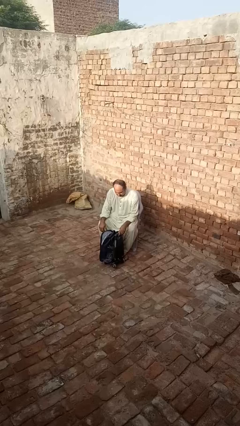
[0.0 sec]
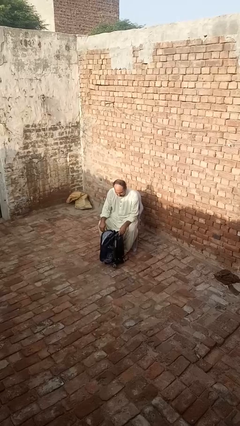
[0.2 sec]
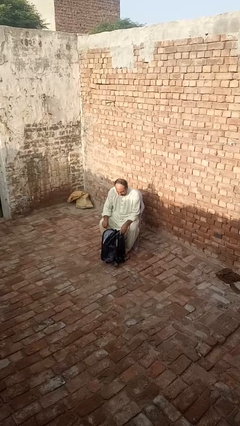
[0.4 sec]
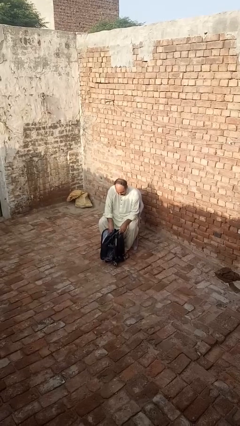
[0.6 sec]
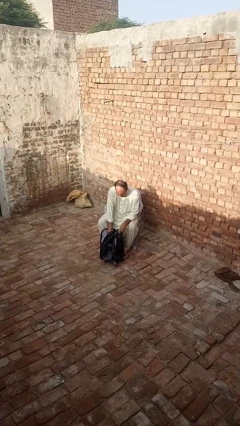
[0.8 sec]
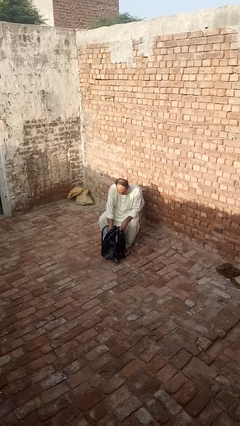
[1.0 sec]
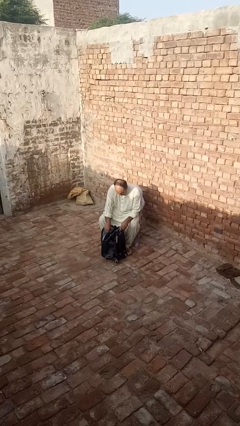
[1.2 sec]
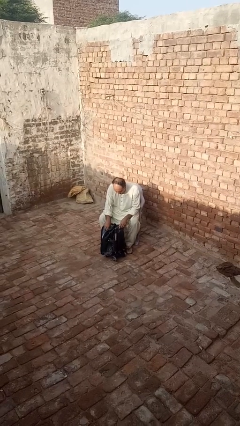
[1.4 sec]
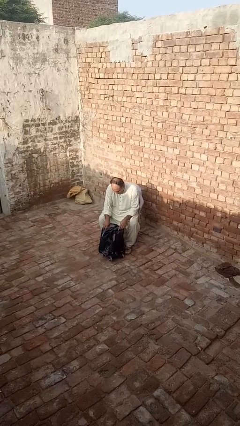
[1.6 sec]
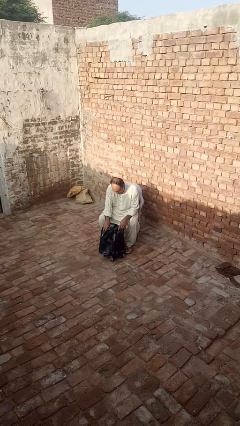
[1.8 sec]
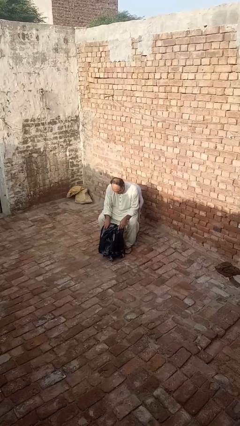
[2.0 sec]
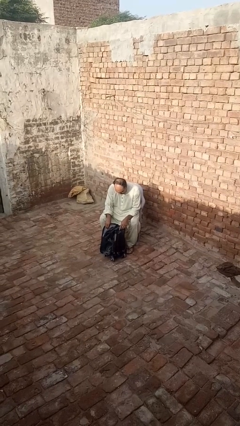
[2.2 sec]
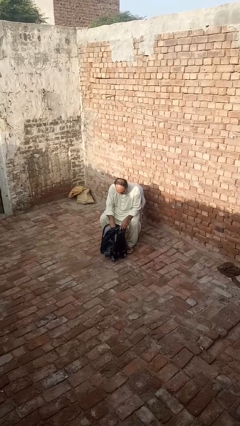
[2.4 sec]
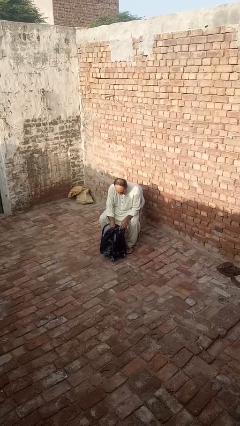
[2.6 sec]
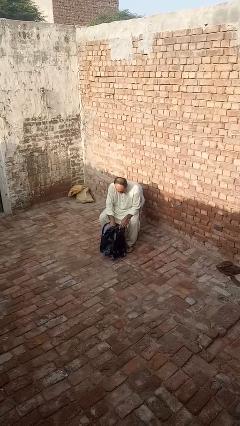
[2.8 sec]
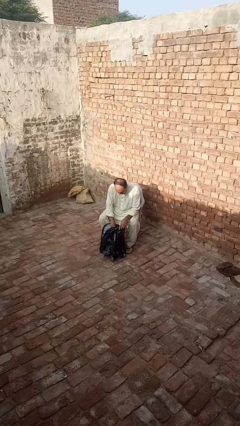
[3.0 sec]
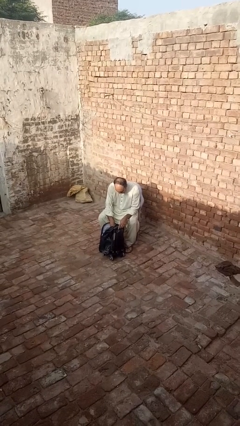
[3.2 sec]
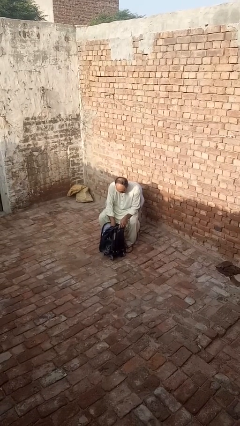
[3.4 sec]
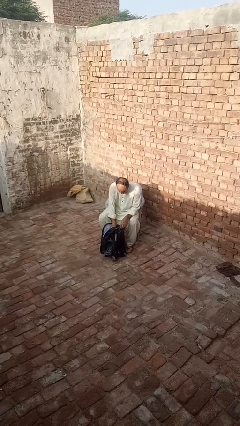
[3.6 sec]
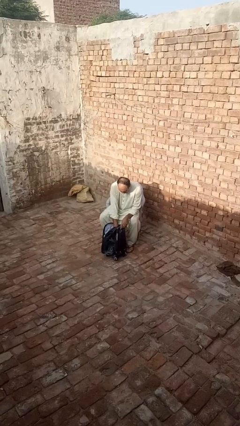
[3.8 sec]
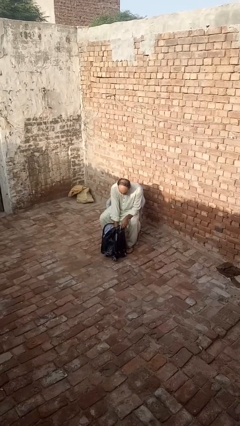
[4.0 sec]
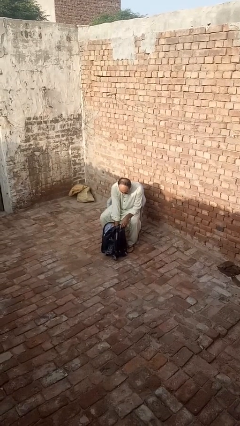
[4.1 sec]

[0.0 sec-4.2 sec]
person searches in backpack

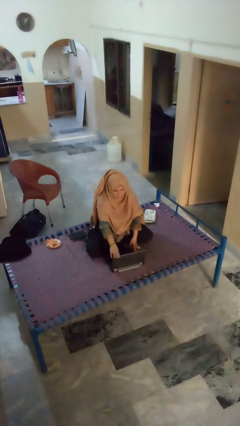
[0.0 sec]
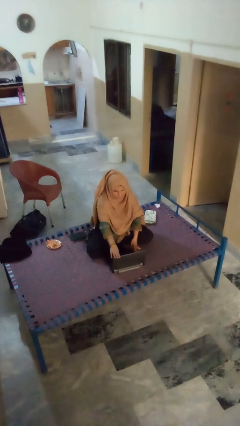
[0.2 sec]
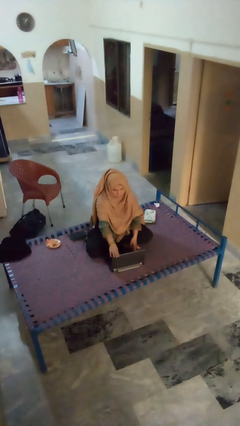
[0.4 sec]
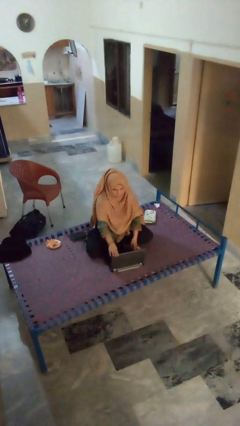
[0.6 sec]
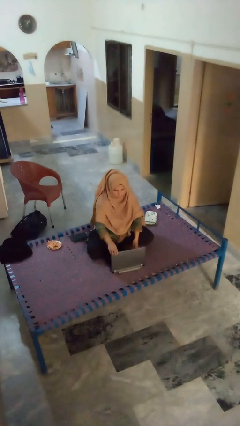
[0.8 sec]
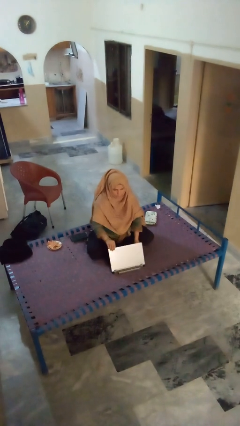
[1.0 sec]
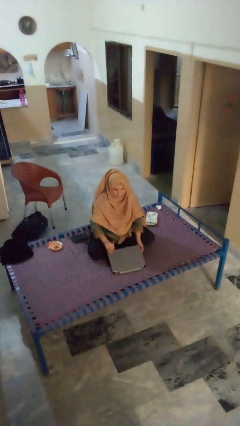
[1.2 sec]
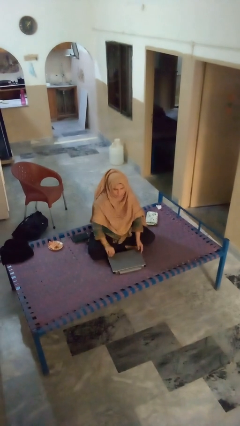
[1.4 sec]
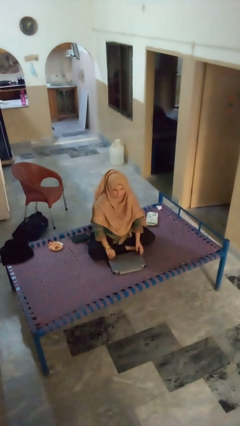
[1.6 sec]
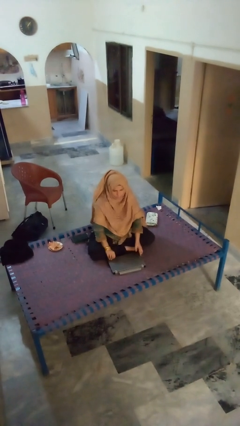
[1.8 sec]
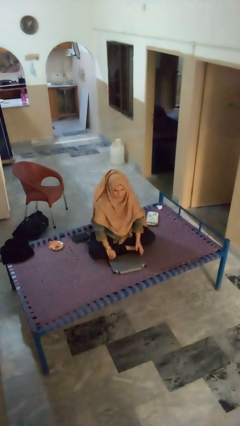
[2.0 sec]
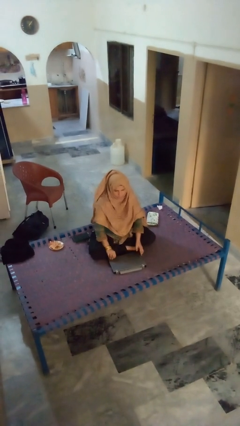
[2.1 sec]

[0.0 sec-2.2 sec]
person closes laptop

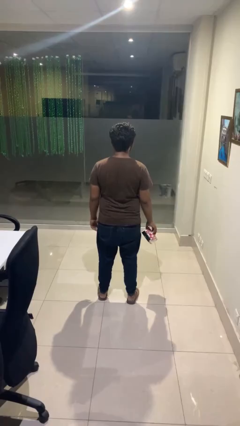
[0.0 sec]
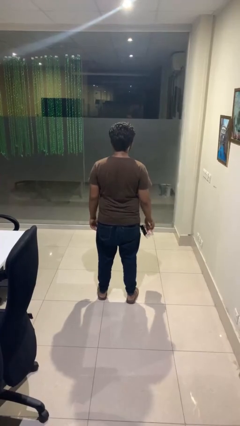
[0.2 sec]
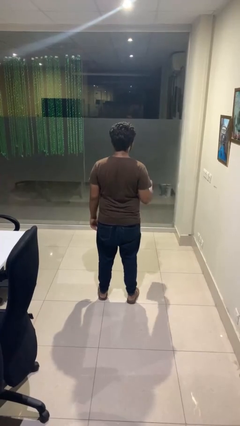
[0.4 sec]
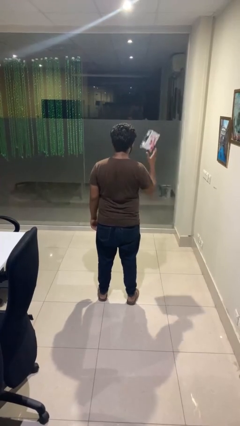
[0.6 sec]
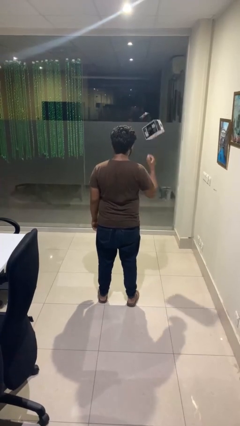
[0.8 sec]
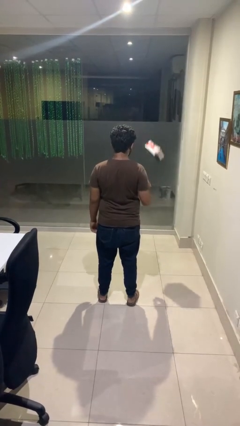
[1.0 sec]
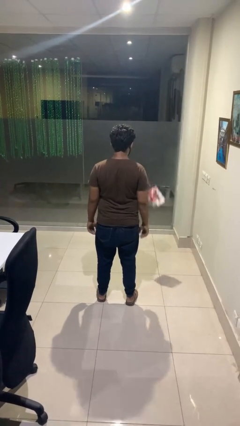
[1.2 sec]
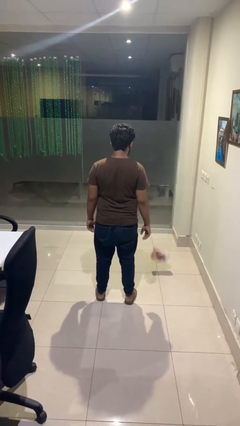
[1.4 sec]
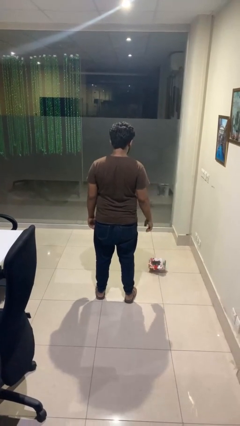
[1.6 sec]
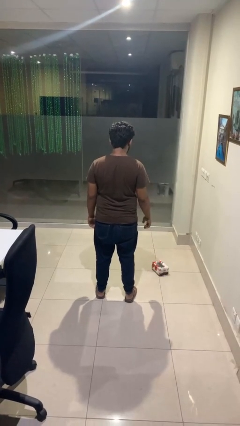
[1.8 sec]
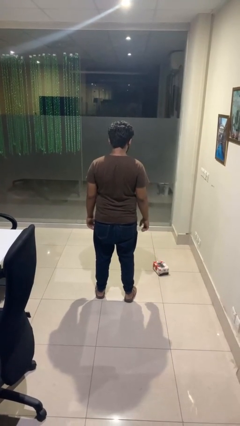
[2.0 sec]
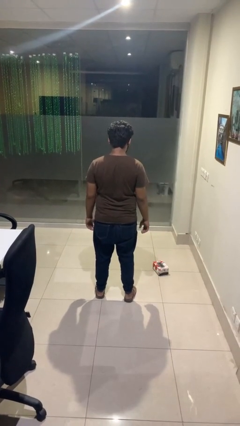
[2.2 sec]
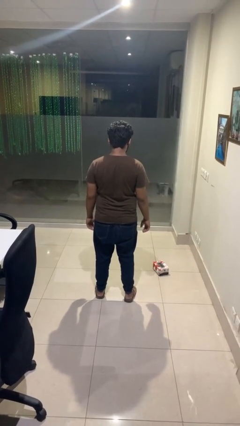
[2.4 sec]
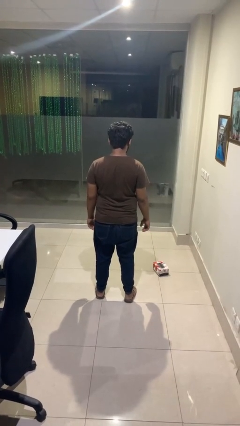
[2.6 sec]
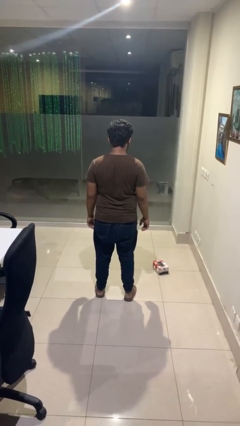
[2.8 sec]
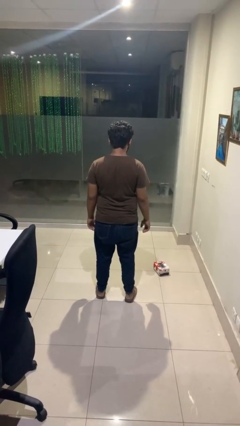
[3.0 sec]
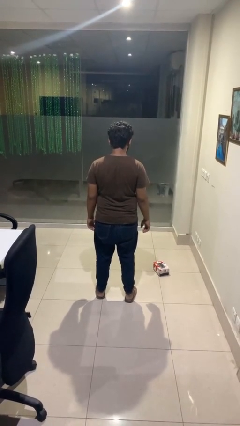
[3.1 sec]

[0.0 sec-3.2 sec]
person throws object into air

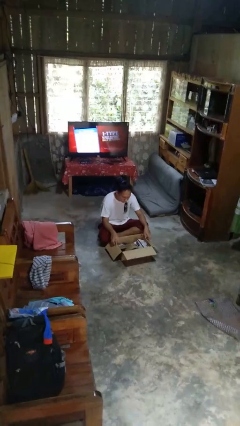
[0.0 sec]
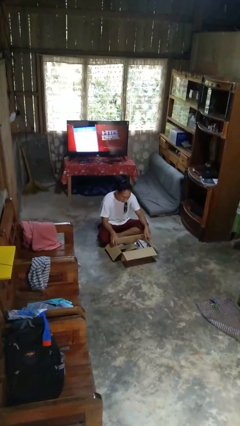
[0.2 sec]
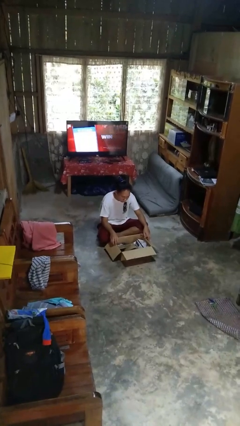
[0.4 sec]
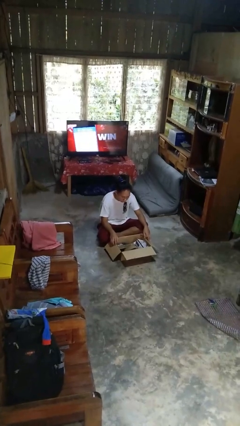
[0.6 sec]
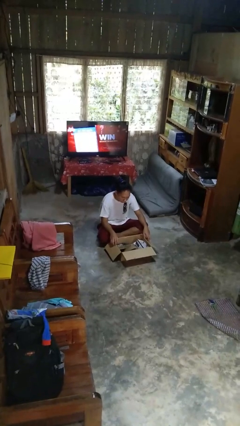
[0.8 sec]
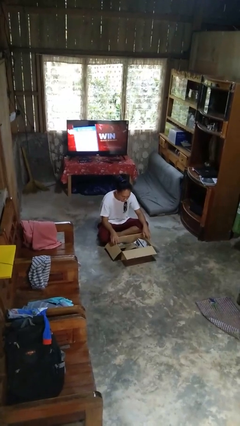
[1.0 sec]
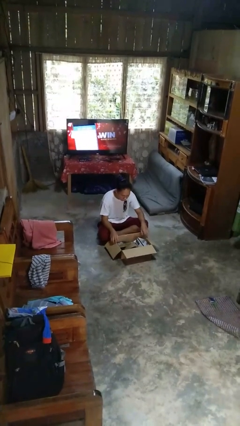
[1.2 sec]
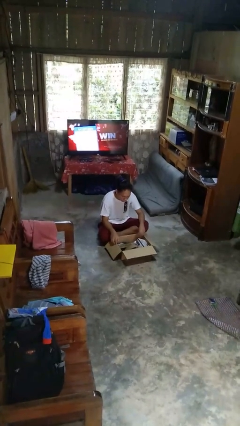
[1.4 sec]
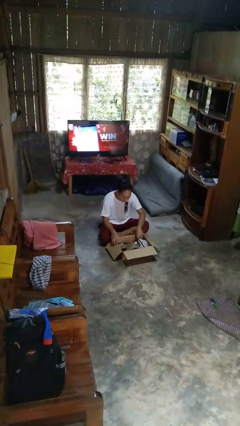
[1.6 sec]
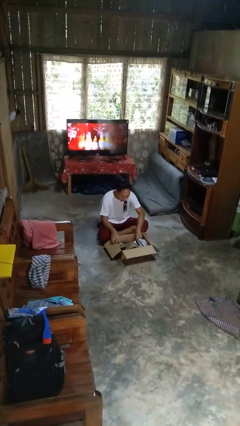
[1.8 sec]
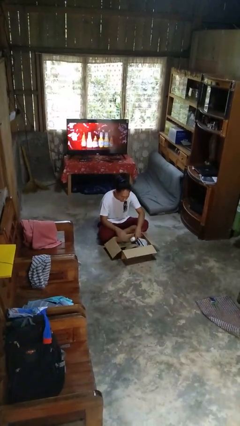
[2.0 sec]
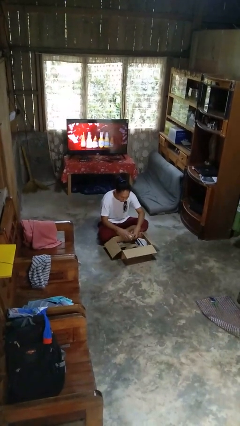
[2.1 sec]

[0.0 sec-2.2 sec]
person searches in box

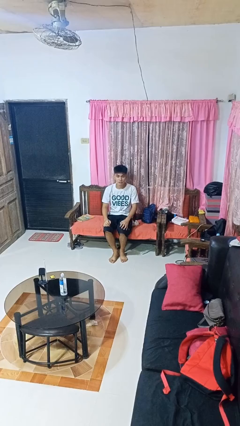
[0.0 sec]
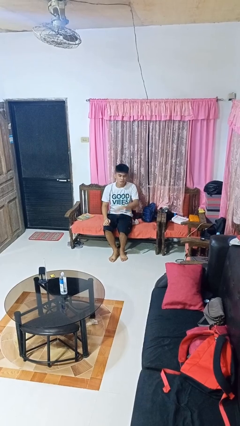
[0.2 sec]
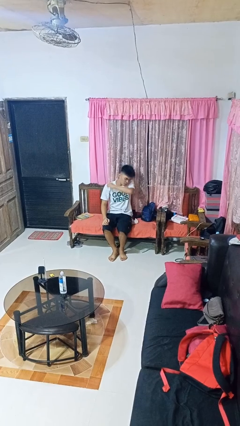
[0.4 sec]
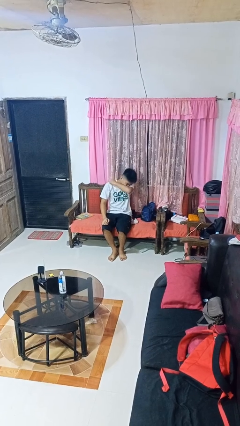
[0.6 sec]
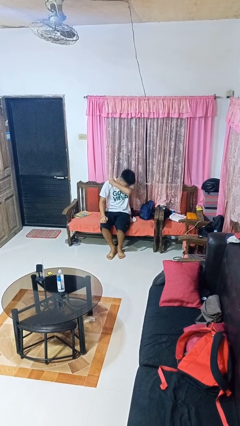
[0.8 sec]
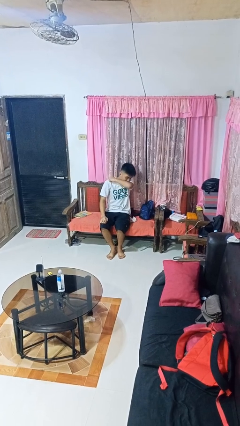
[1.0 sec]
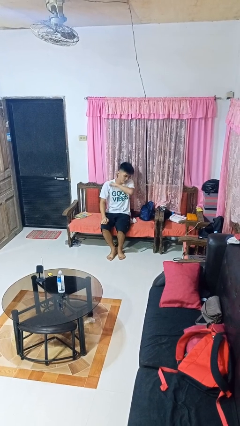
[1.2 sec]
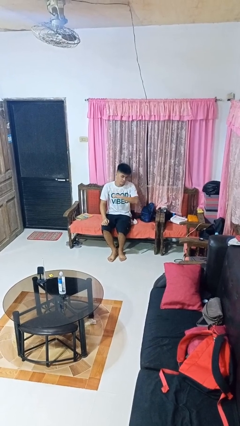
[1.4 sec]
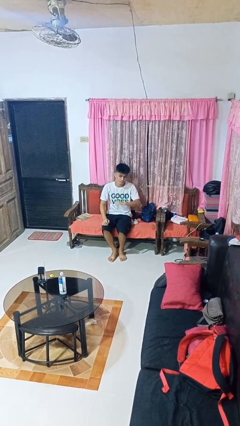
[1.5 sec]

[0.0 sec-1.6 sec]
person sneezes into arm

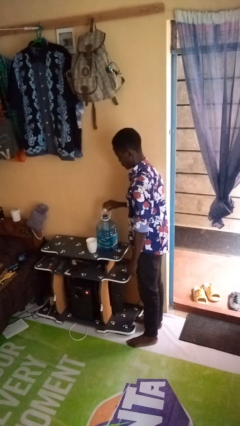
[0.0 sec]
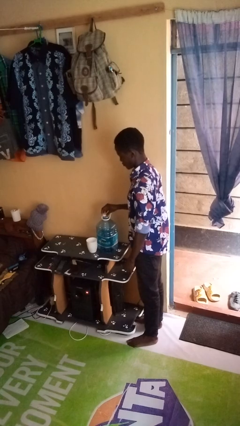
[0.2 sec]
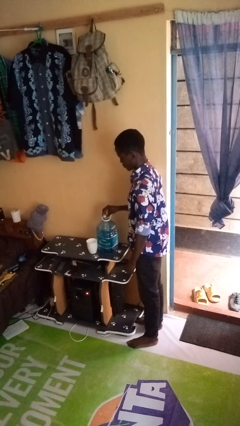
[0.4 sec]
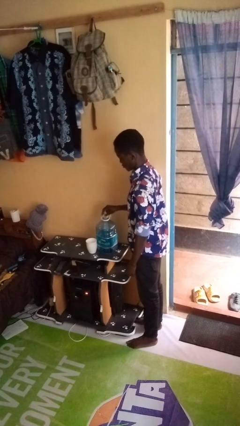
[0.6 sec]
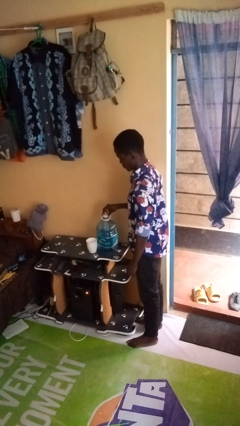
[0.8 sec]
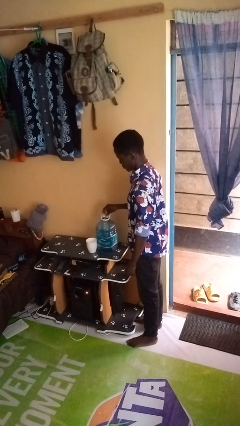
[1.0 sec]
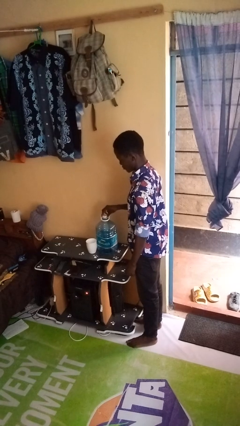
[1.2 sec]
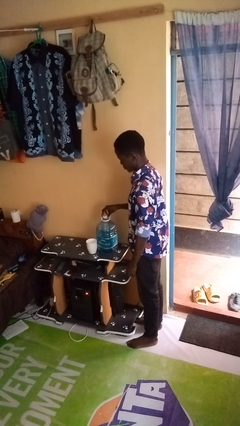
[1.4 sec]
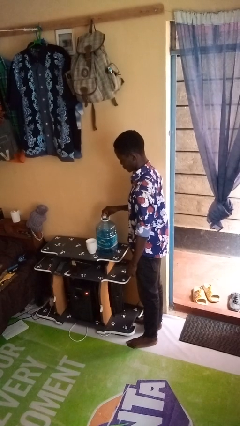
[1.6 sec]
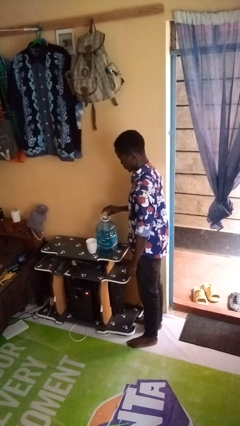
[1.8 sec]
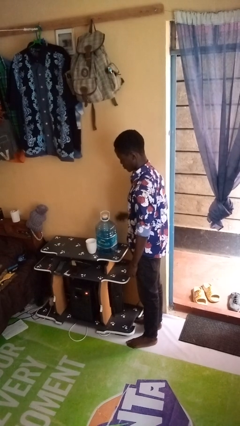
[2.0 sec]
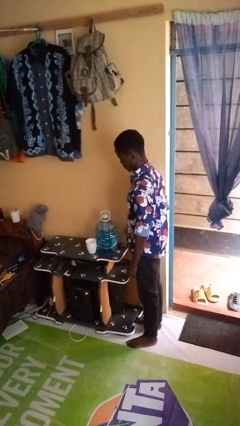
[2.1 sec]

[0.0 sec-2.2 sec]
person screws lid to bottle

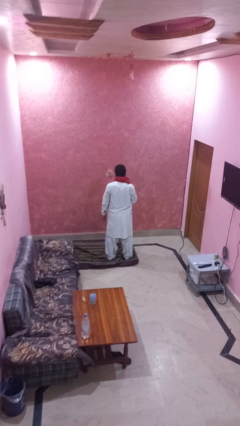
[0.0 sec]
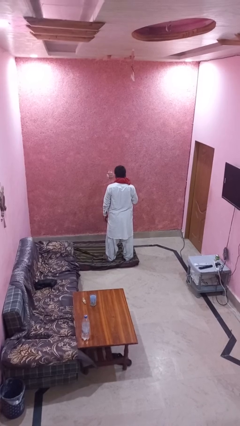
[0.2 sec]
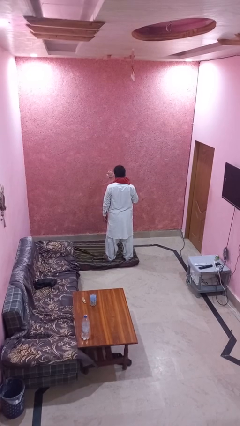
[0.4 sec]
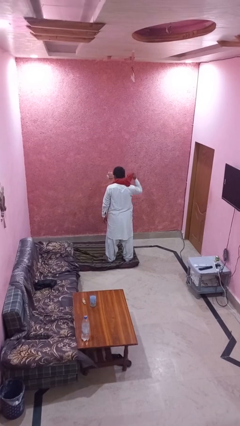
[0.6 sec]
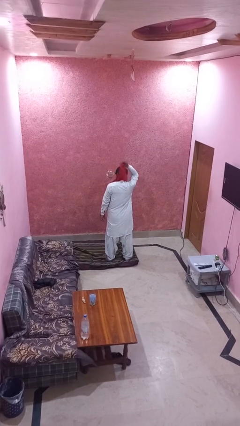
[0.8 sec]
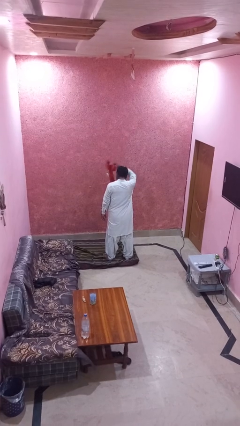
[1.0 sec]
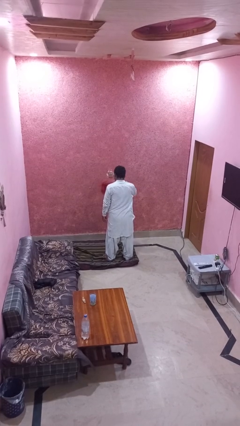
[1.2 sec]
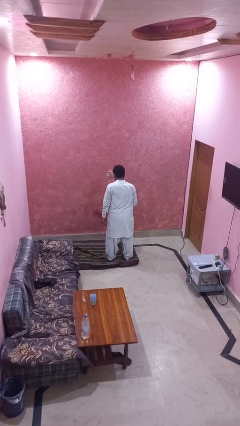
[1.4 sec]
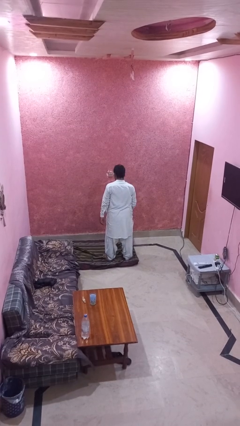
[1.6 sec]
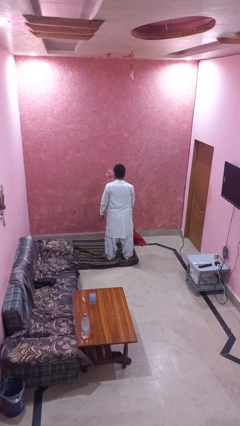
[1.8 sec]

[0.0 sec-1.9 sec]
person takes off scarf
